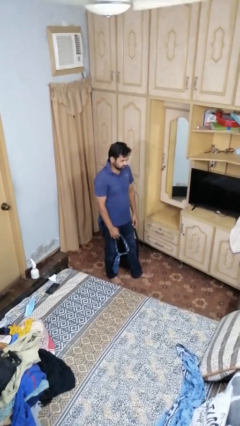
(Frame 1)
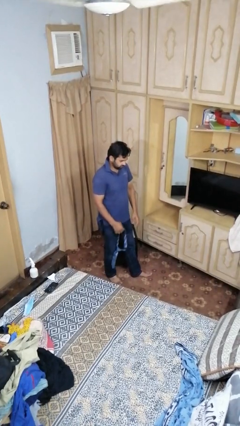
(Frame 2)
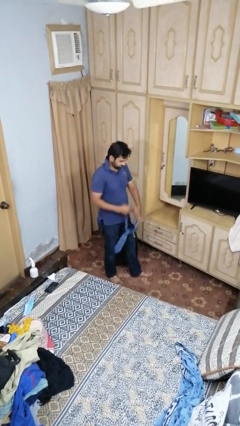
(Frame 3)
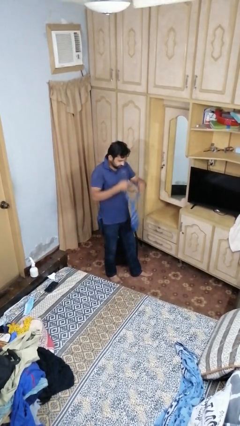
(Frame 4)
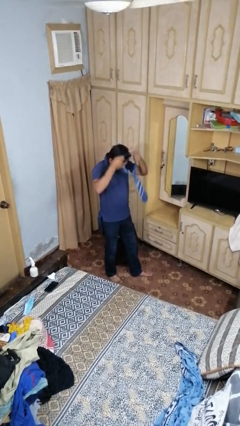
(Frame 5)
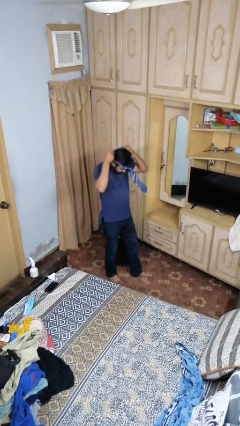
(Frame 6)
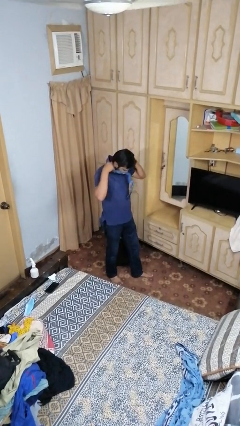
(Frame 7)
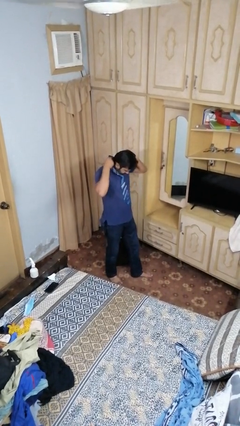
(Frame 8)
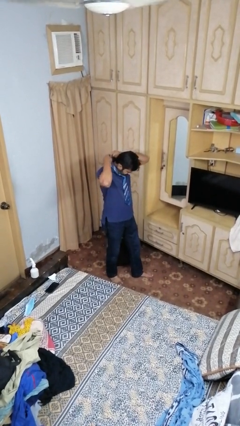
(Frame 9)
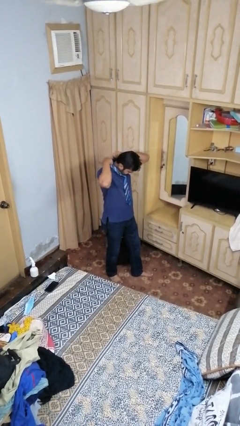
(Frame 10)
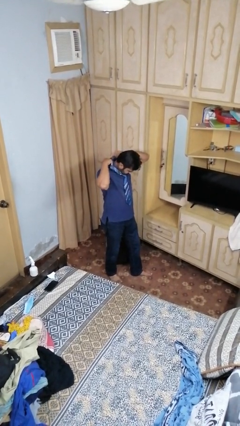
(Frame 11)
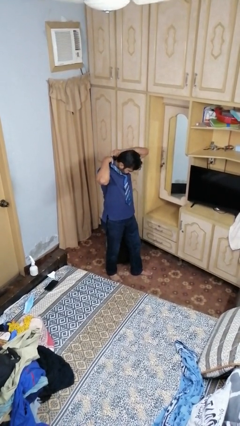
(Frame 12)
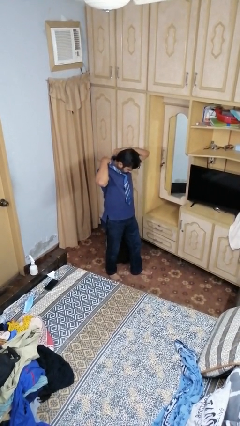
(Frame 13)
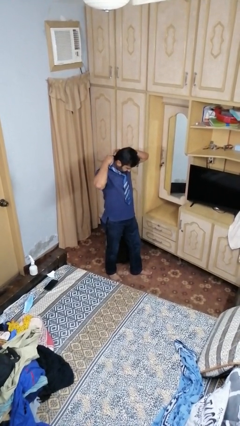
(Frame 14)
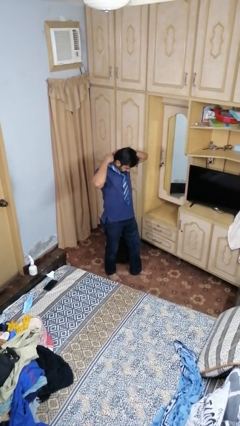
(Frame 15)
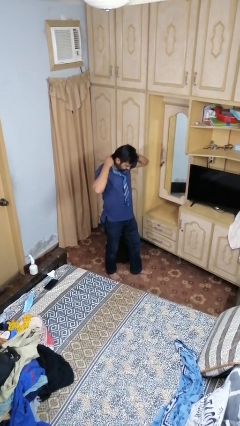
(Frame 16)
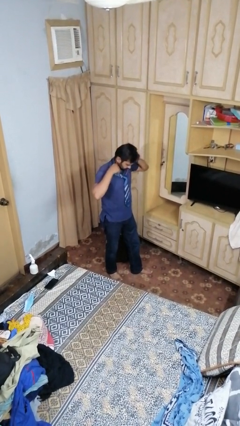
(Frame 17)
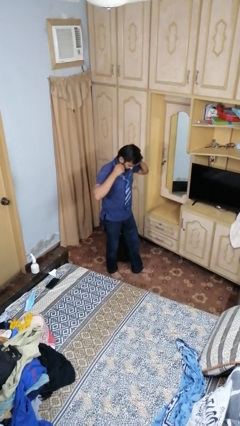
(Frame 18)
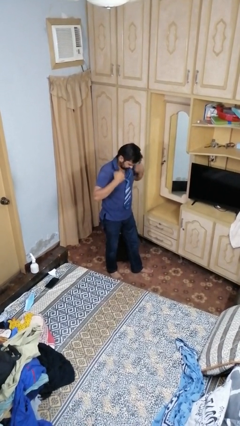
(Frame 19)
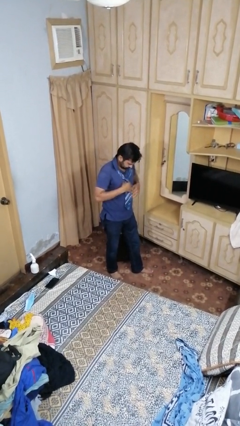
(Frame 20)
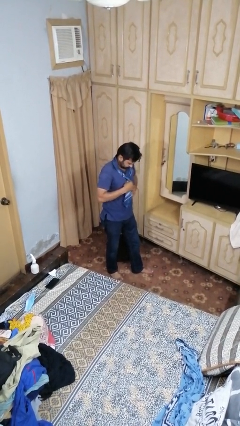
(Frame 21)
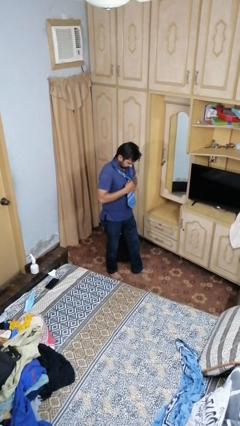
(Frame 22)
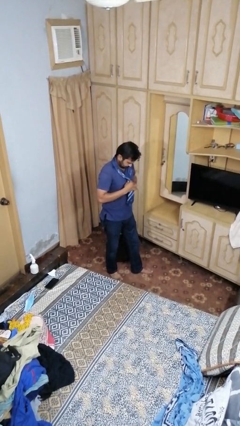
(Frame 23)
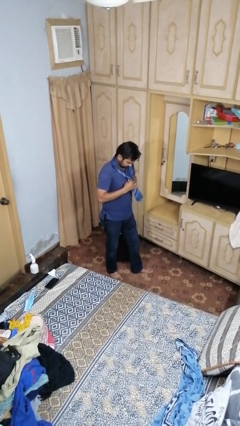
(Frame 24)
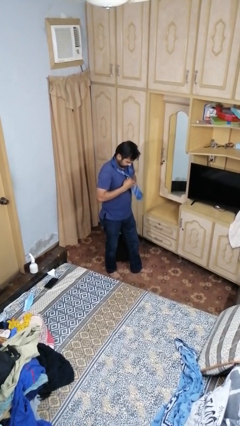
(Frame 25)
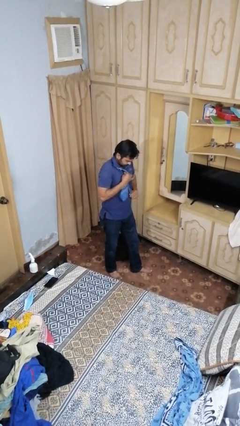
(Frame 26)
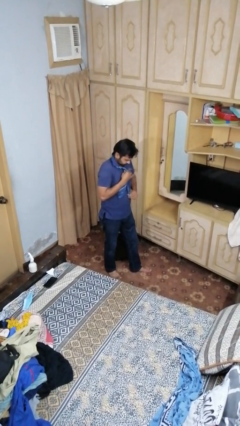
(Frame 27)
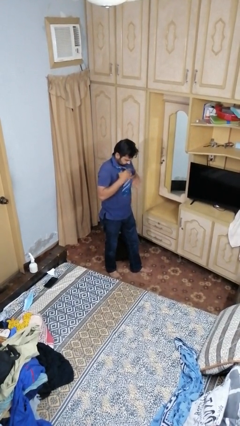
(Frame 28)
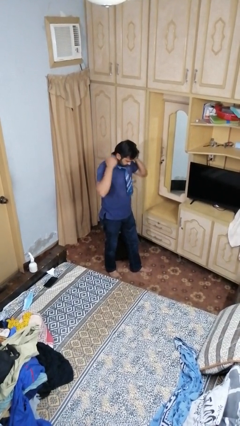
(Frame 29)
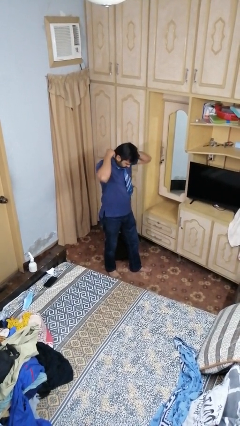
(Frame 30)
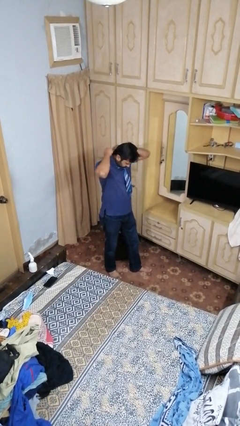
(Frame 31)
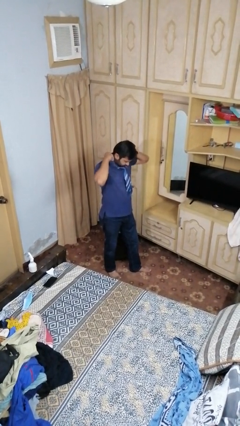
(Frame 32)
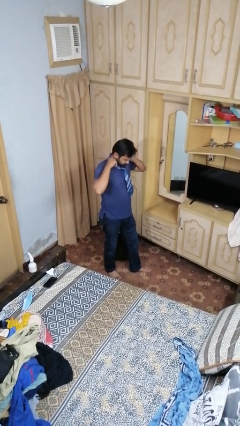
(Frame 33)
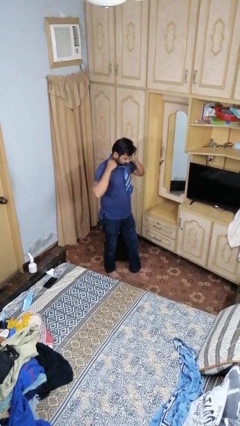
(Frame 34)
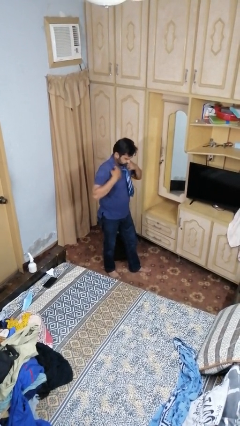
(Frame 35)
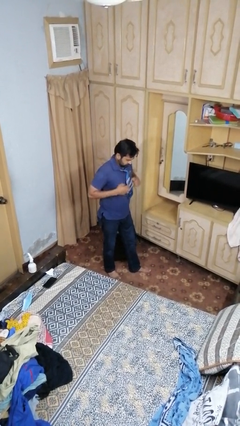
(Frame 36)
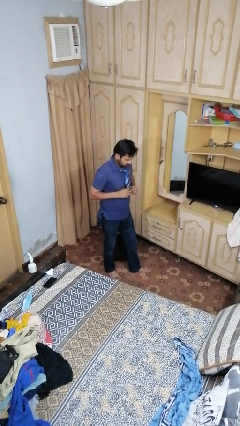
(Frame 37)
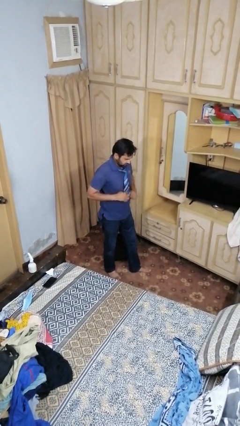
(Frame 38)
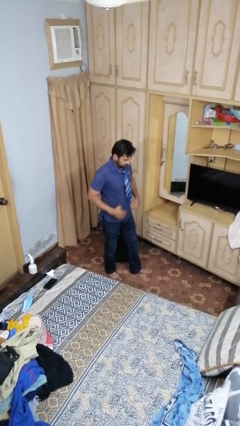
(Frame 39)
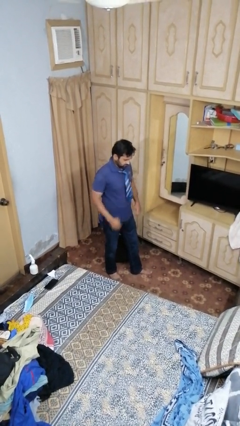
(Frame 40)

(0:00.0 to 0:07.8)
person puts on necktie

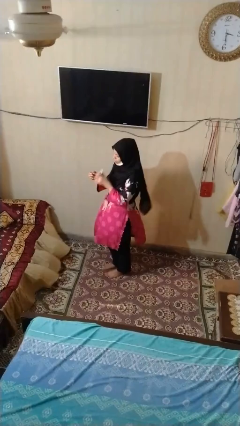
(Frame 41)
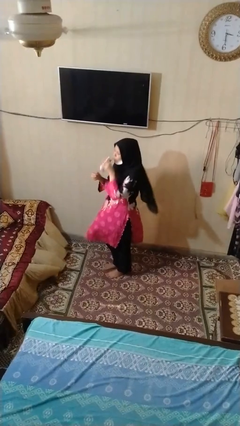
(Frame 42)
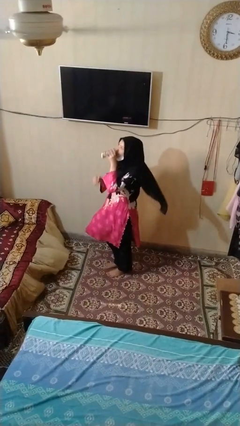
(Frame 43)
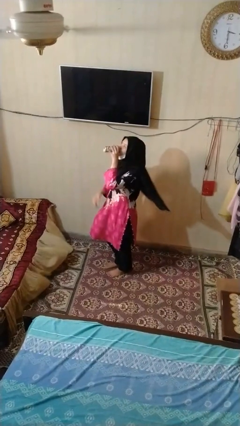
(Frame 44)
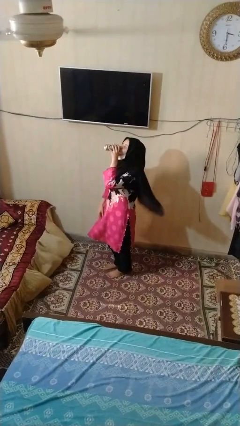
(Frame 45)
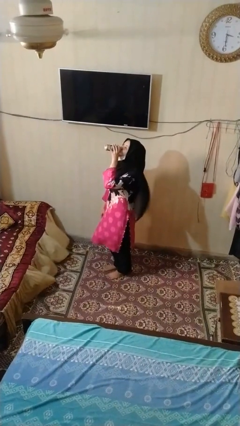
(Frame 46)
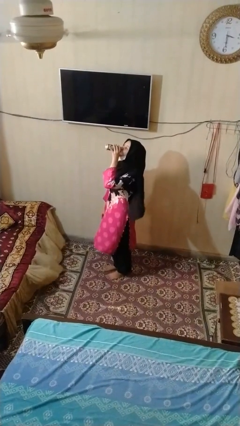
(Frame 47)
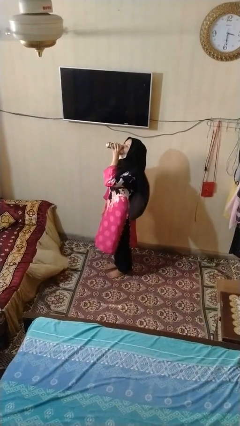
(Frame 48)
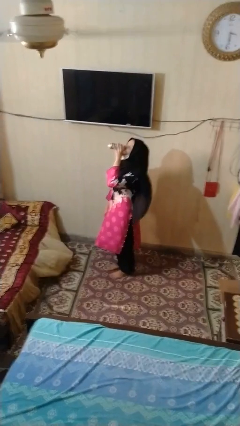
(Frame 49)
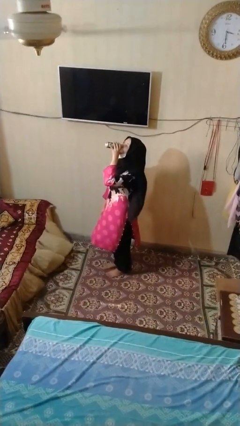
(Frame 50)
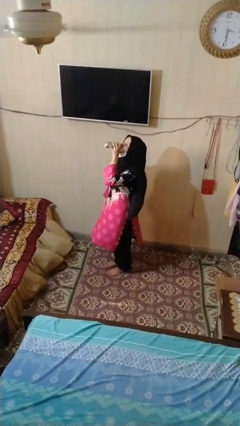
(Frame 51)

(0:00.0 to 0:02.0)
person drinks from beverage can

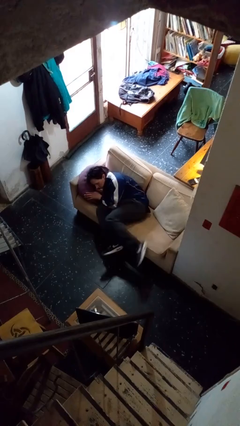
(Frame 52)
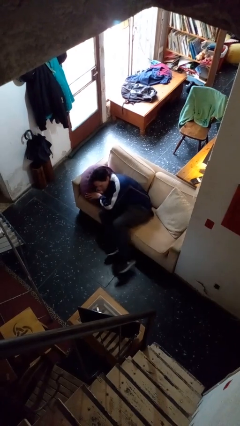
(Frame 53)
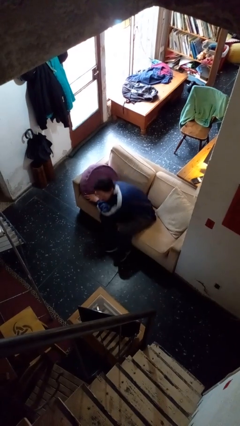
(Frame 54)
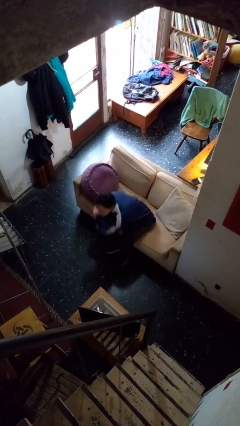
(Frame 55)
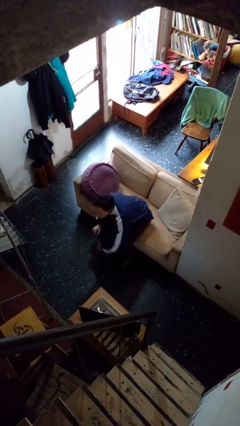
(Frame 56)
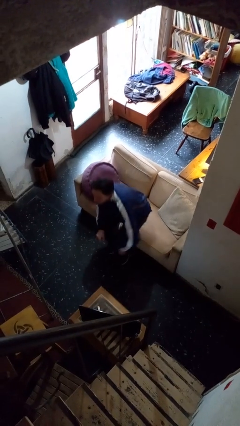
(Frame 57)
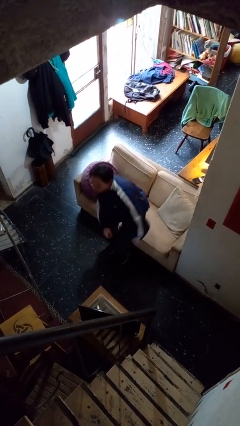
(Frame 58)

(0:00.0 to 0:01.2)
person stands up

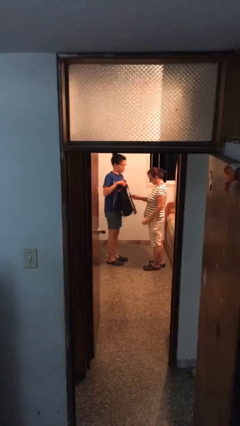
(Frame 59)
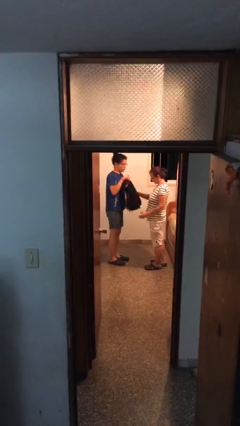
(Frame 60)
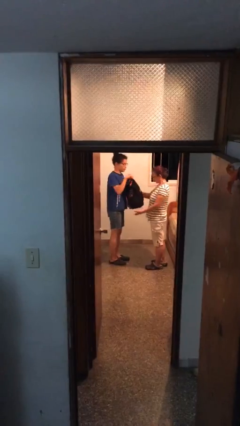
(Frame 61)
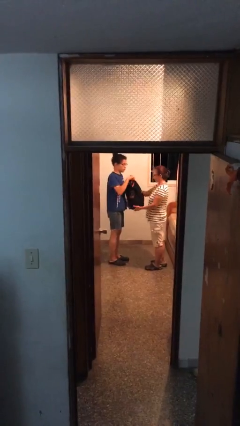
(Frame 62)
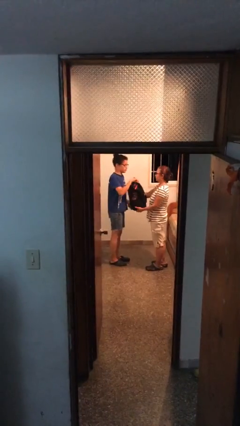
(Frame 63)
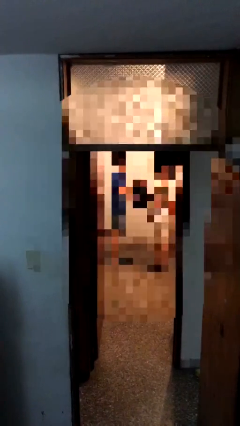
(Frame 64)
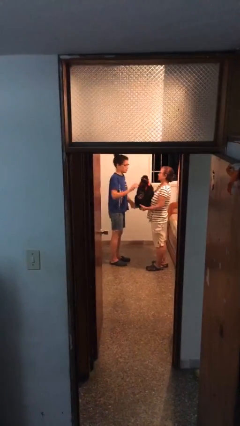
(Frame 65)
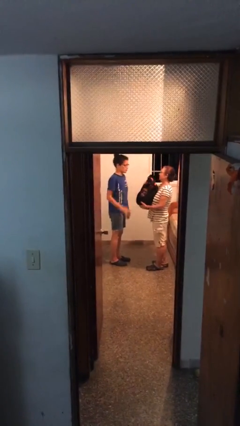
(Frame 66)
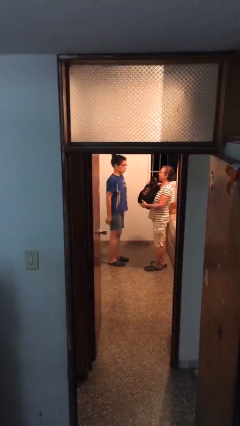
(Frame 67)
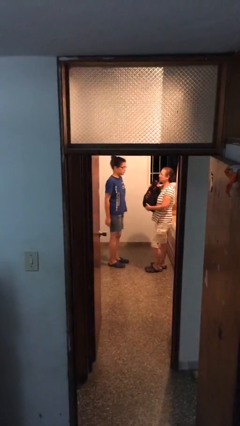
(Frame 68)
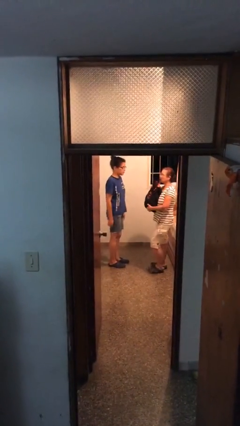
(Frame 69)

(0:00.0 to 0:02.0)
person transfers object to person

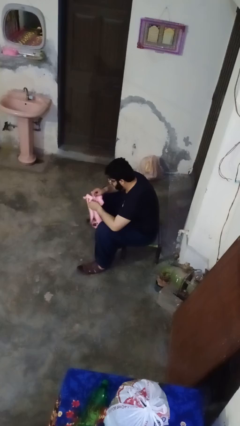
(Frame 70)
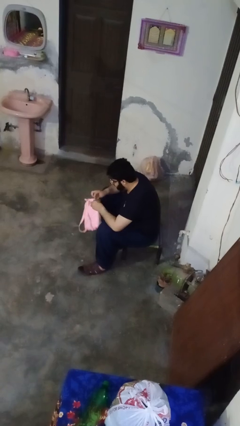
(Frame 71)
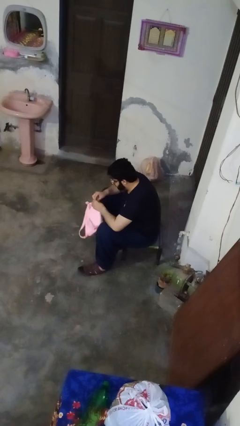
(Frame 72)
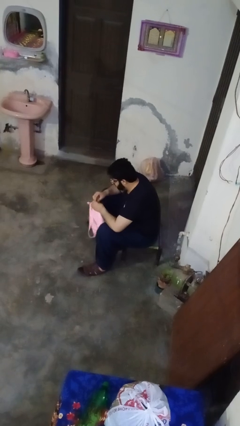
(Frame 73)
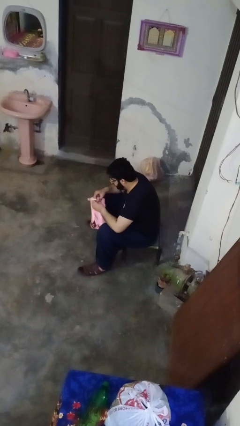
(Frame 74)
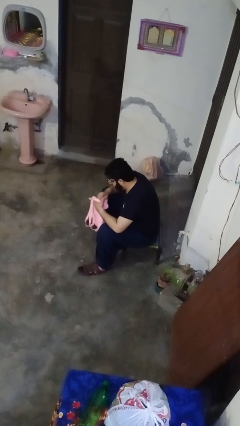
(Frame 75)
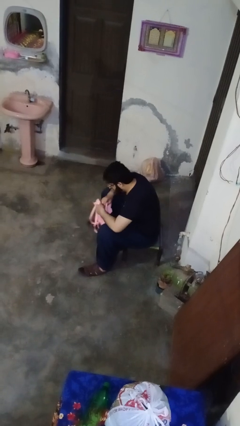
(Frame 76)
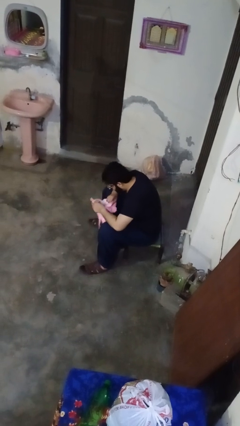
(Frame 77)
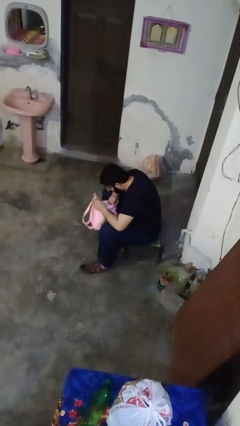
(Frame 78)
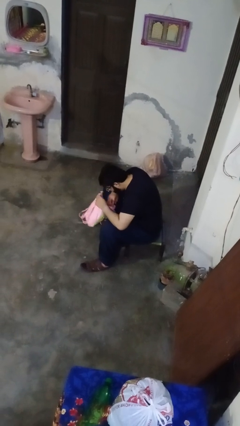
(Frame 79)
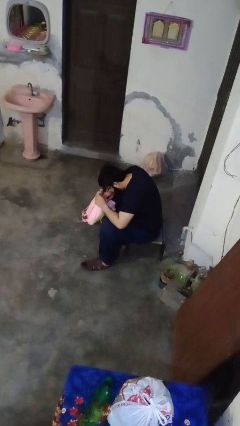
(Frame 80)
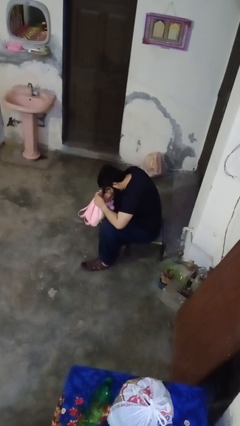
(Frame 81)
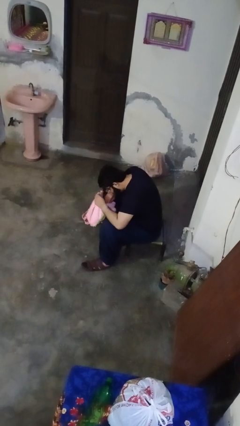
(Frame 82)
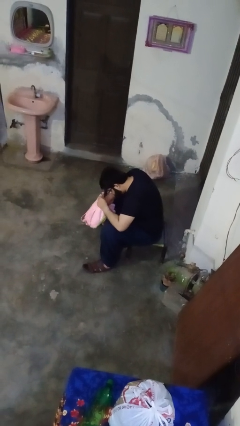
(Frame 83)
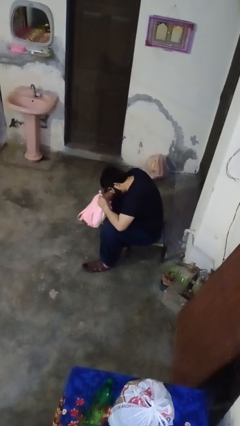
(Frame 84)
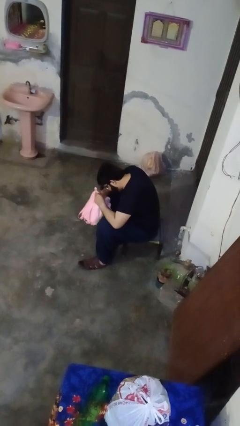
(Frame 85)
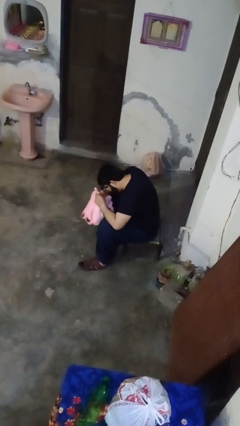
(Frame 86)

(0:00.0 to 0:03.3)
person searches in bag

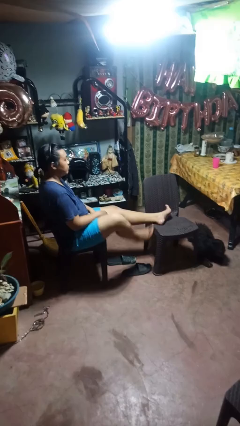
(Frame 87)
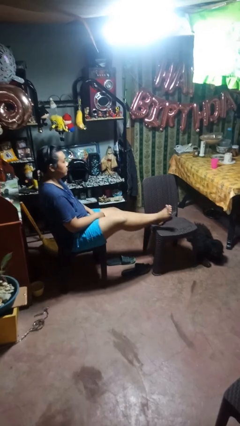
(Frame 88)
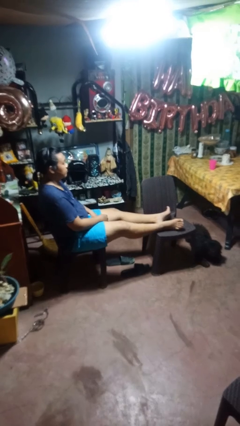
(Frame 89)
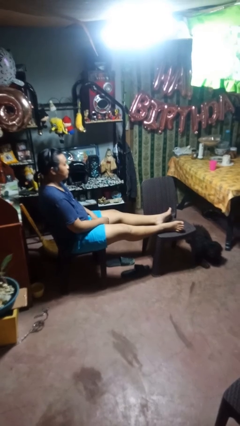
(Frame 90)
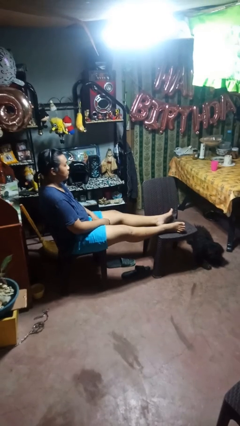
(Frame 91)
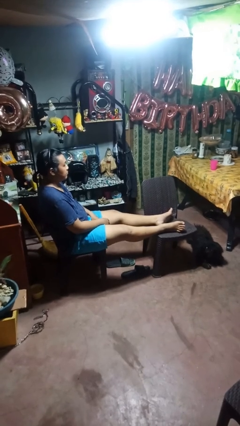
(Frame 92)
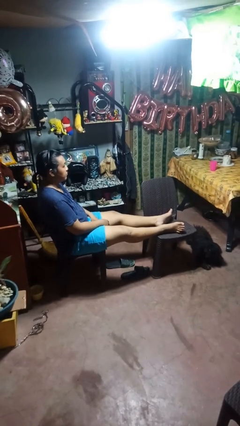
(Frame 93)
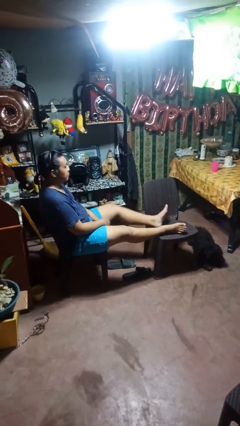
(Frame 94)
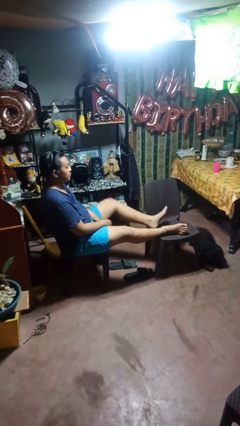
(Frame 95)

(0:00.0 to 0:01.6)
person puts feet up
